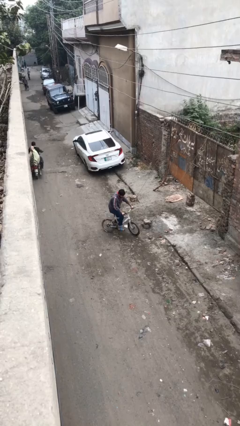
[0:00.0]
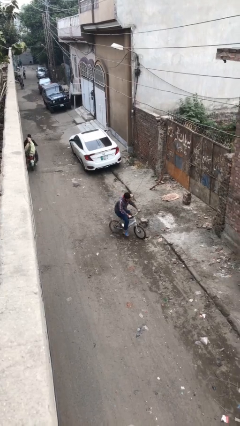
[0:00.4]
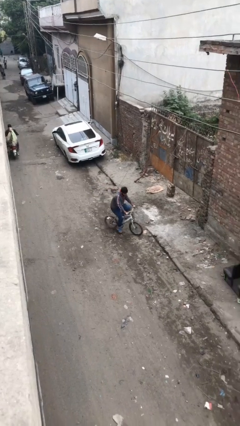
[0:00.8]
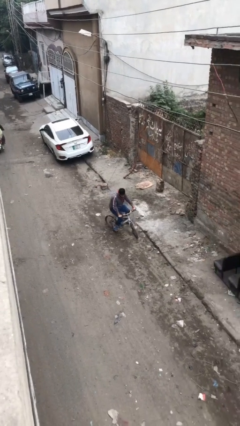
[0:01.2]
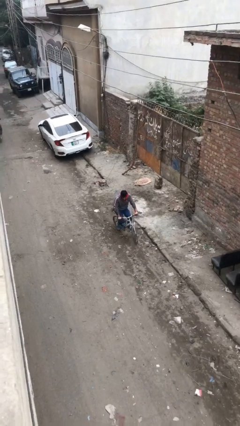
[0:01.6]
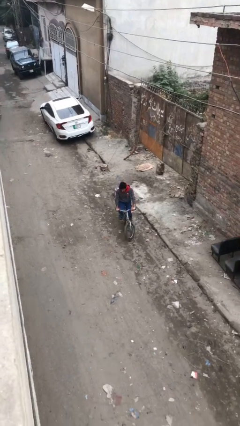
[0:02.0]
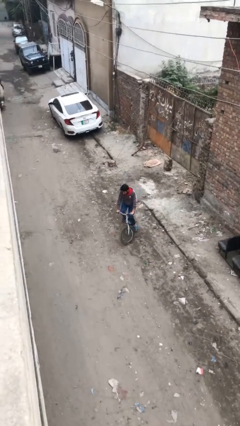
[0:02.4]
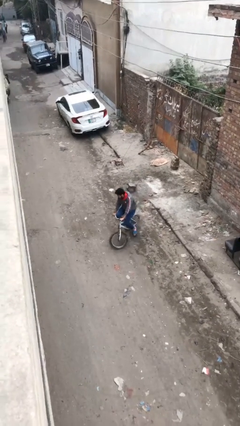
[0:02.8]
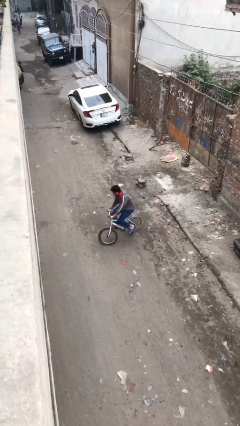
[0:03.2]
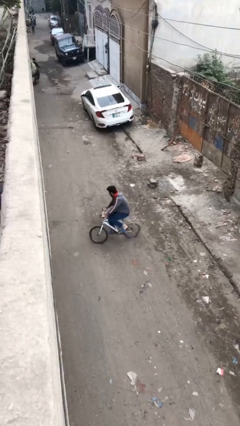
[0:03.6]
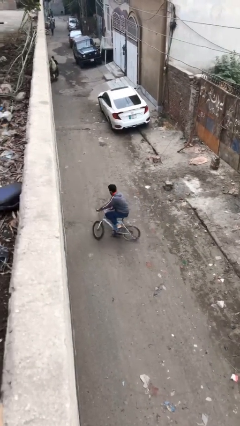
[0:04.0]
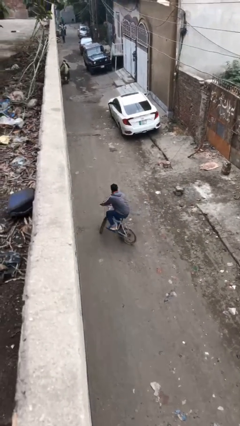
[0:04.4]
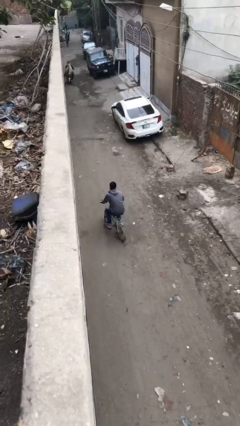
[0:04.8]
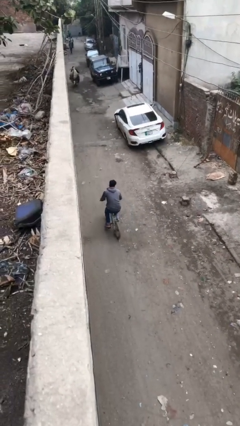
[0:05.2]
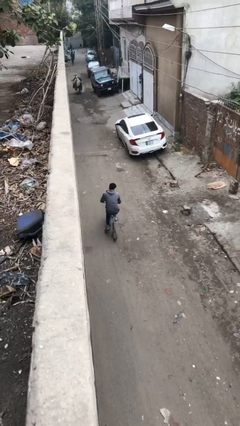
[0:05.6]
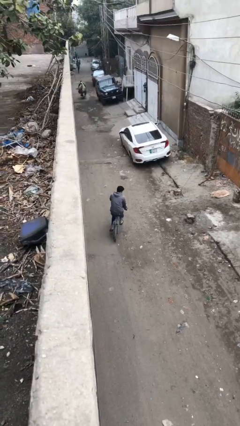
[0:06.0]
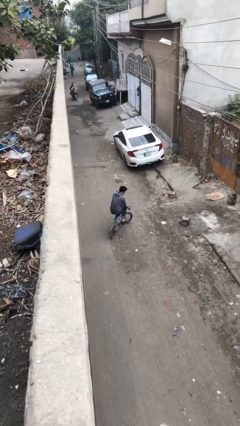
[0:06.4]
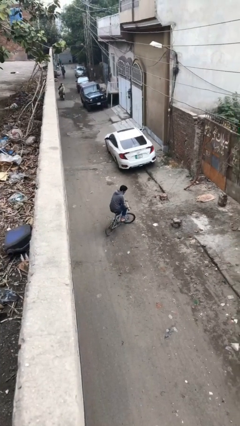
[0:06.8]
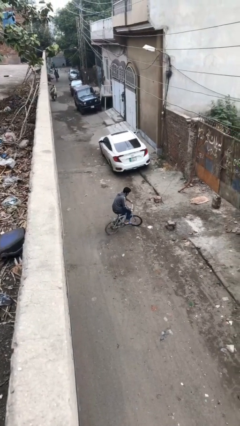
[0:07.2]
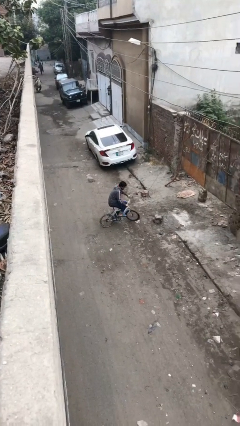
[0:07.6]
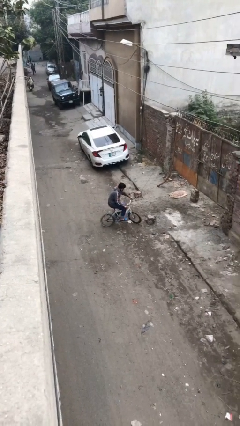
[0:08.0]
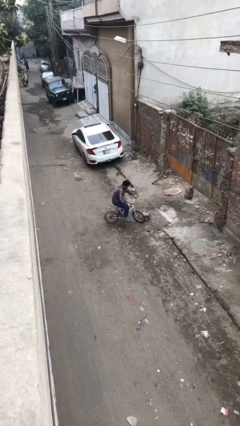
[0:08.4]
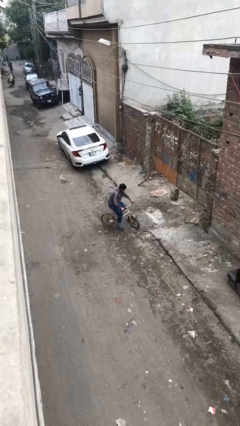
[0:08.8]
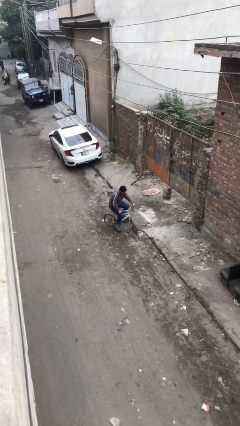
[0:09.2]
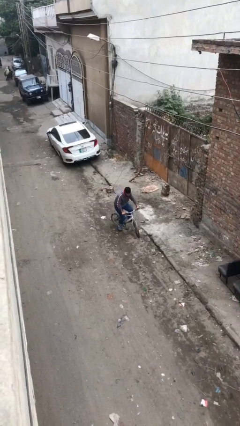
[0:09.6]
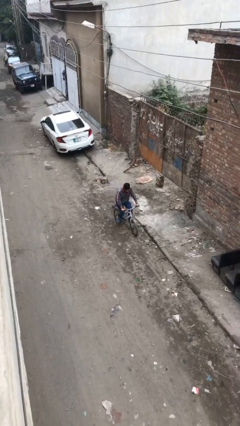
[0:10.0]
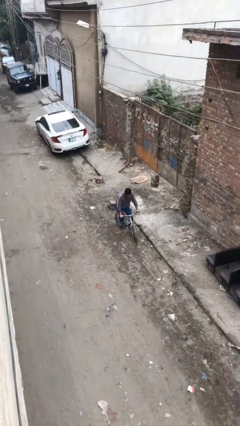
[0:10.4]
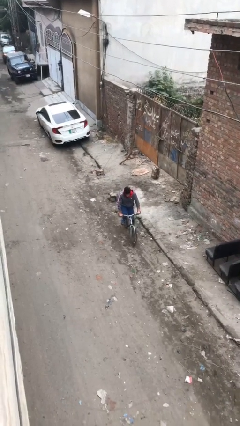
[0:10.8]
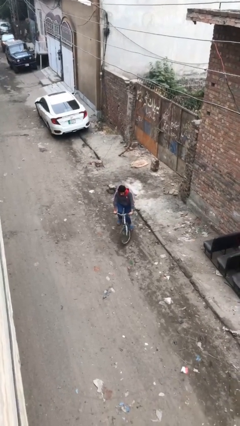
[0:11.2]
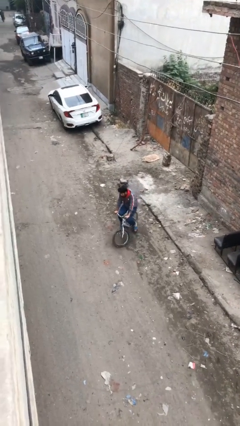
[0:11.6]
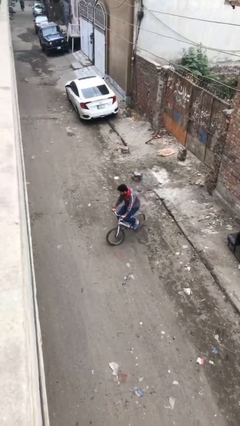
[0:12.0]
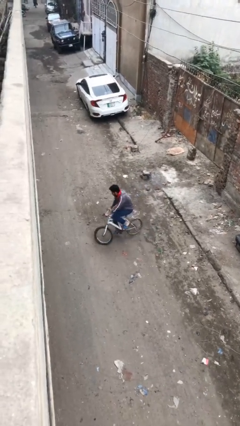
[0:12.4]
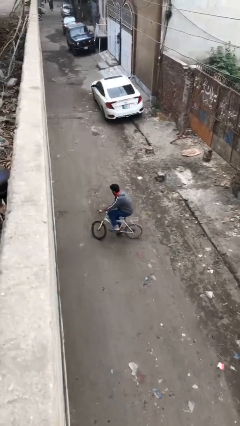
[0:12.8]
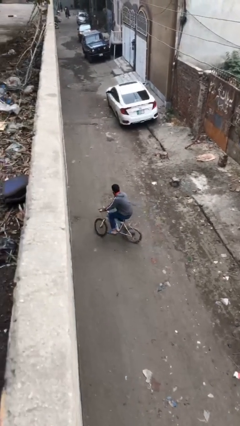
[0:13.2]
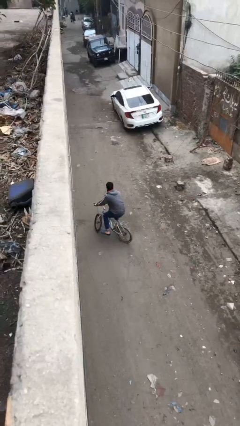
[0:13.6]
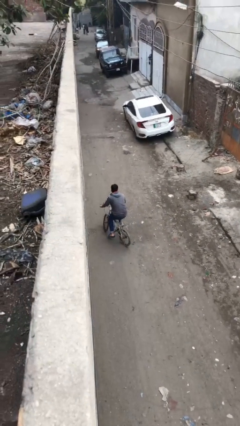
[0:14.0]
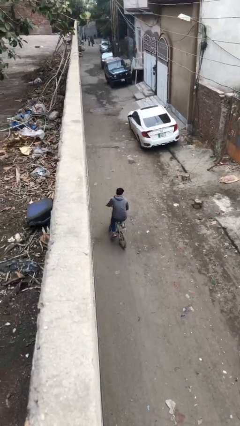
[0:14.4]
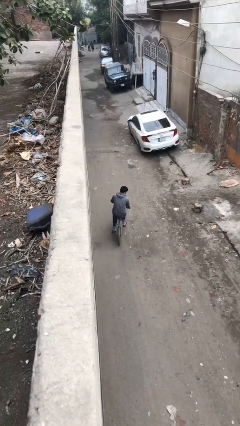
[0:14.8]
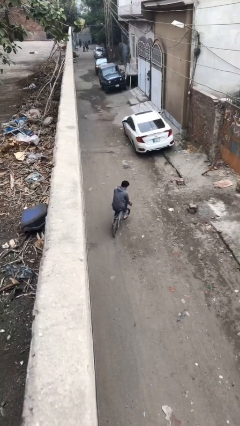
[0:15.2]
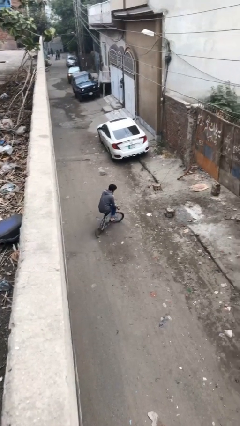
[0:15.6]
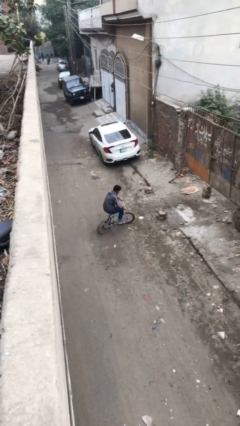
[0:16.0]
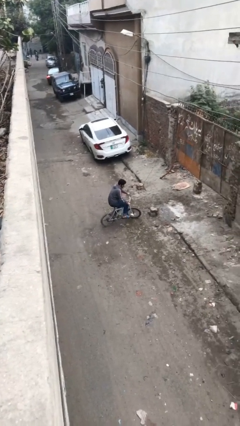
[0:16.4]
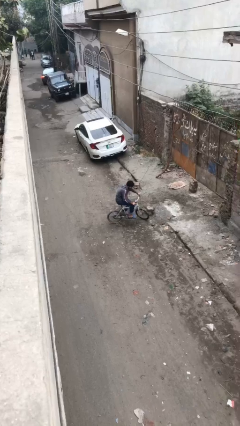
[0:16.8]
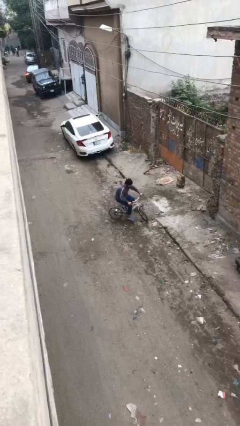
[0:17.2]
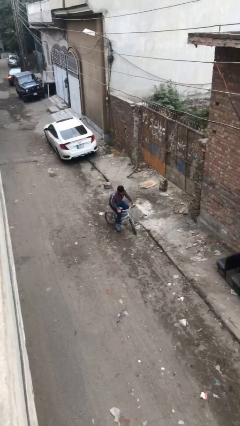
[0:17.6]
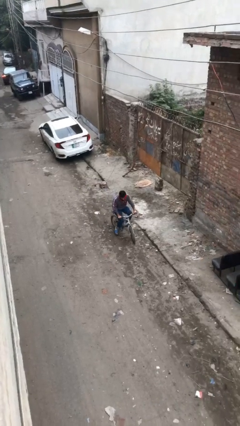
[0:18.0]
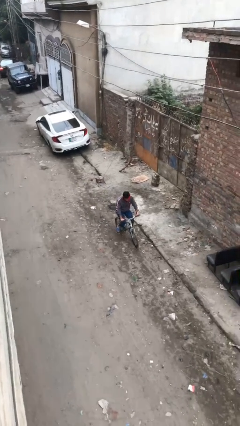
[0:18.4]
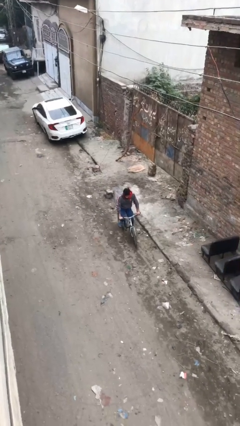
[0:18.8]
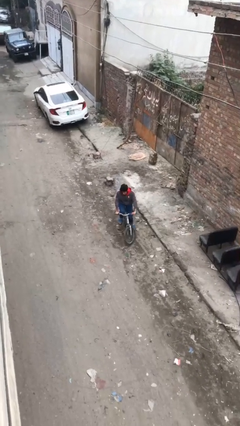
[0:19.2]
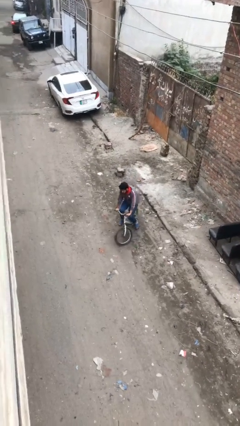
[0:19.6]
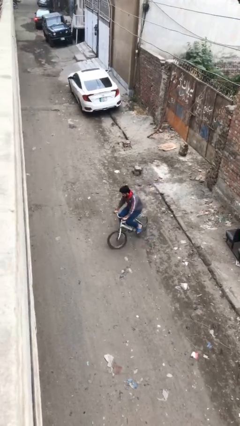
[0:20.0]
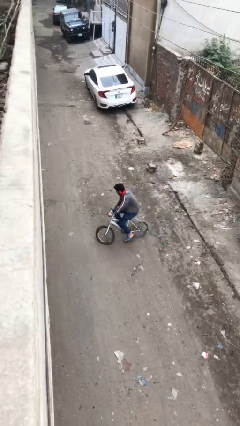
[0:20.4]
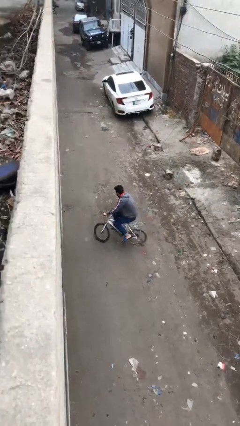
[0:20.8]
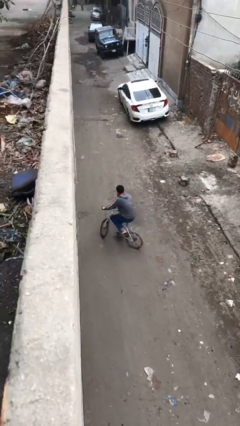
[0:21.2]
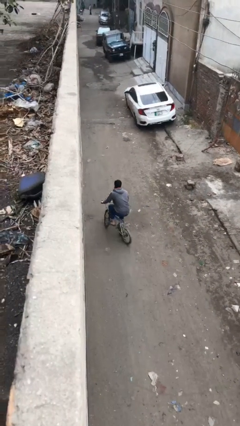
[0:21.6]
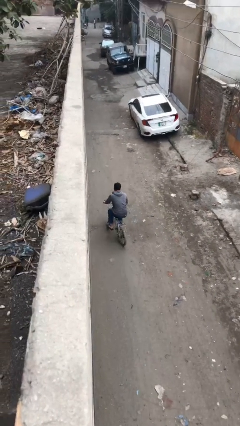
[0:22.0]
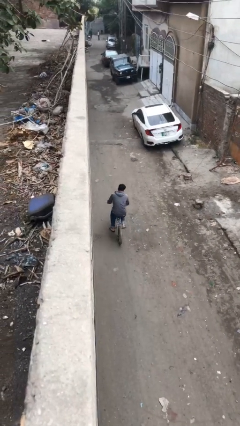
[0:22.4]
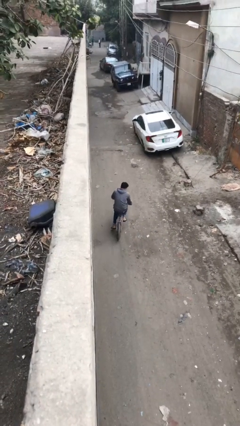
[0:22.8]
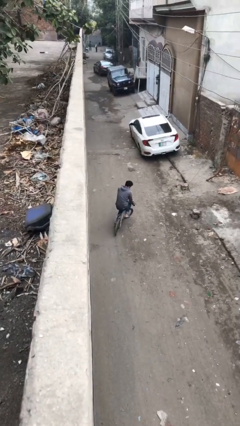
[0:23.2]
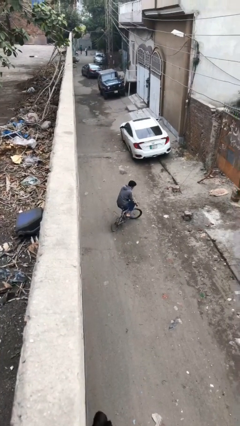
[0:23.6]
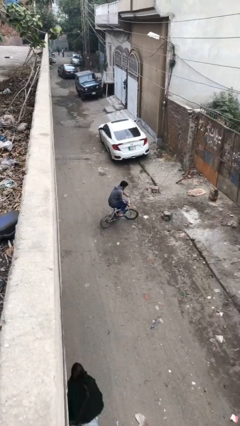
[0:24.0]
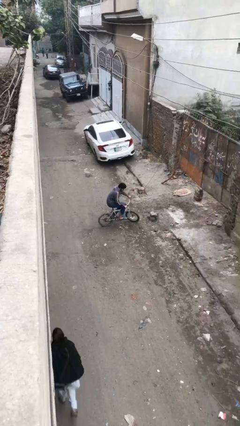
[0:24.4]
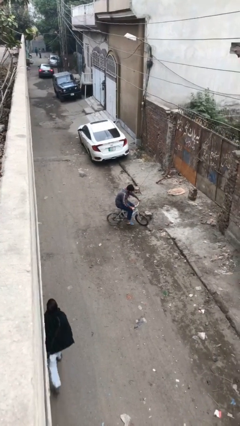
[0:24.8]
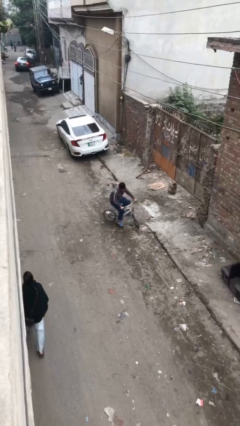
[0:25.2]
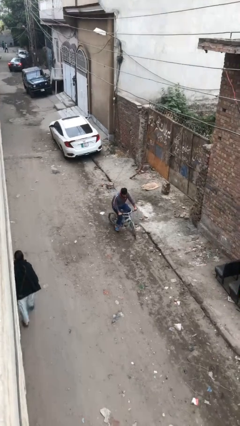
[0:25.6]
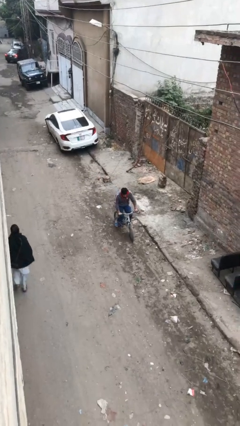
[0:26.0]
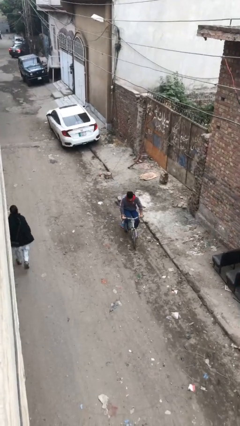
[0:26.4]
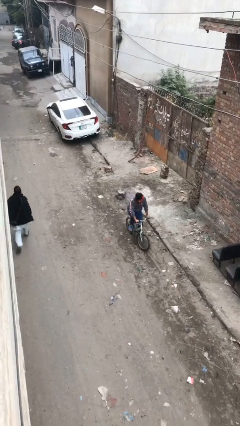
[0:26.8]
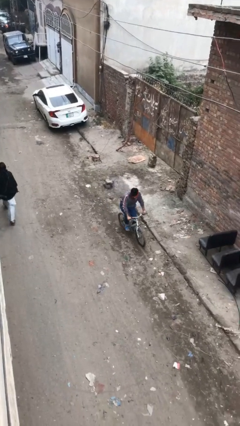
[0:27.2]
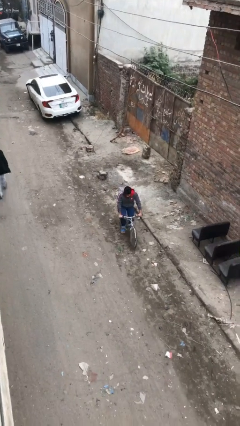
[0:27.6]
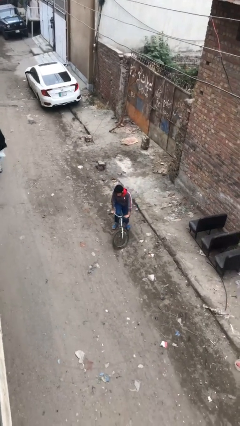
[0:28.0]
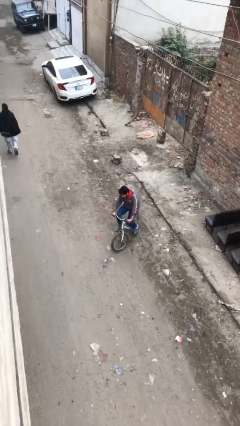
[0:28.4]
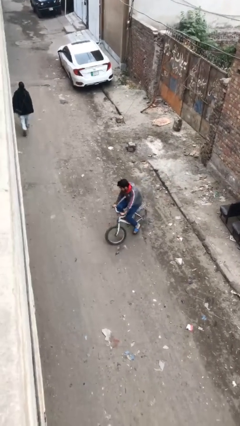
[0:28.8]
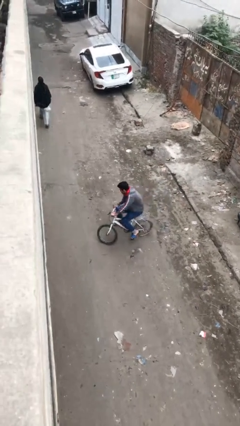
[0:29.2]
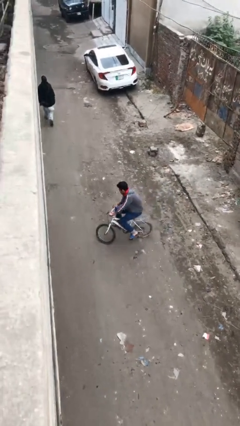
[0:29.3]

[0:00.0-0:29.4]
person rides bicycle

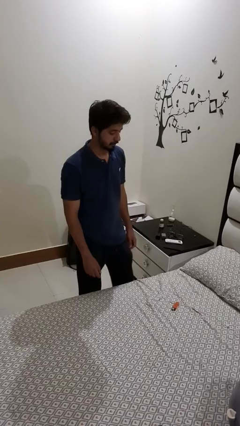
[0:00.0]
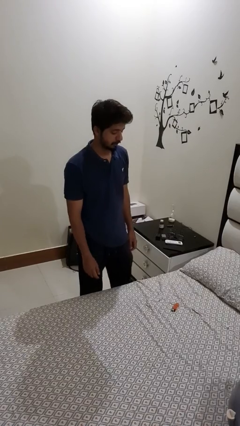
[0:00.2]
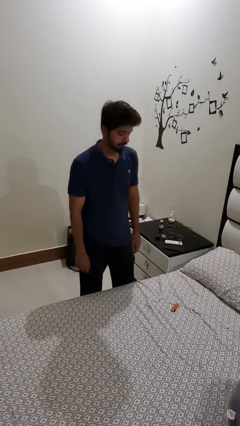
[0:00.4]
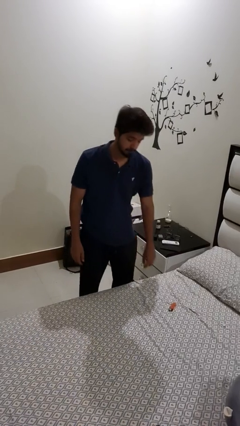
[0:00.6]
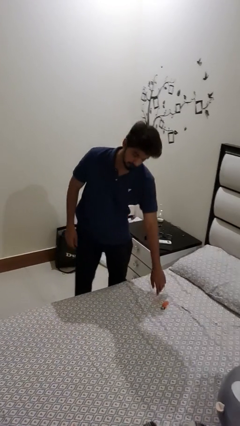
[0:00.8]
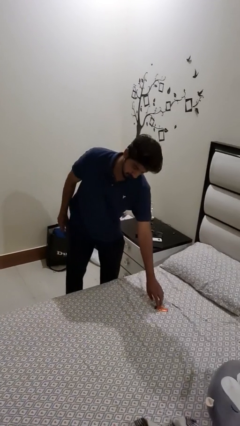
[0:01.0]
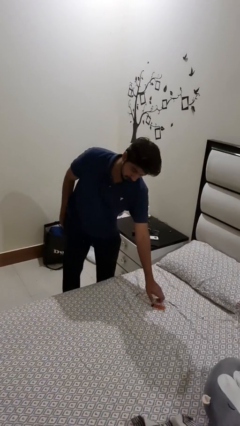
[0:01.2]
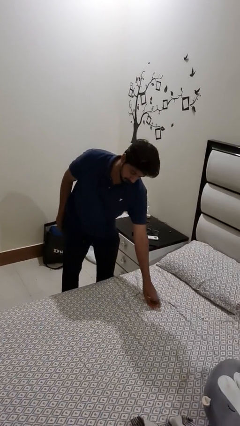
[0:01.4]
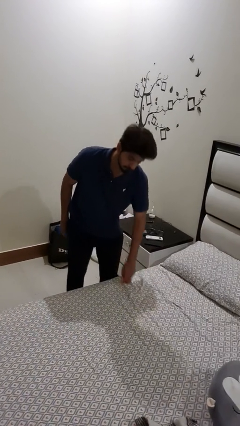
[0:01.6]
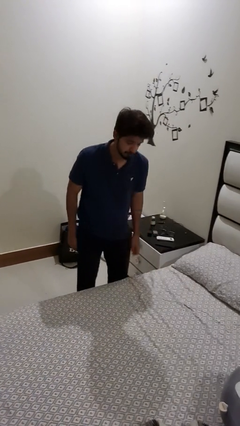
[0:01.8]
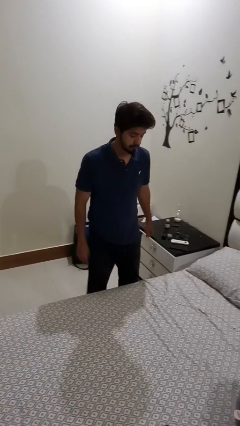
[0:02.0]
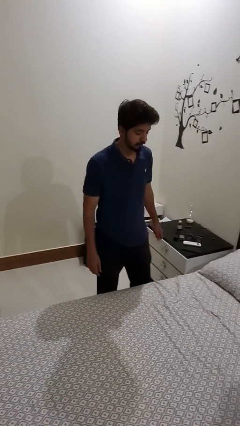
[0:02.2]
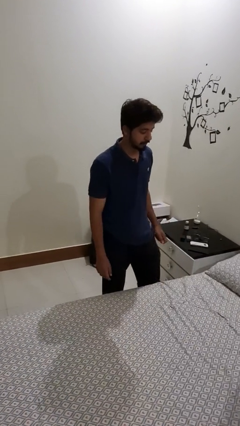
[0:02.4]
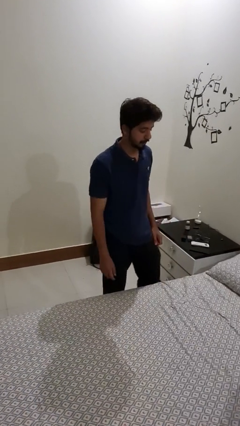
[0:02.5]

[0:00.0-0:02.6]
person picks up object from bed

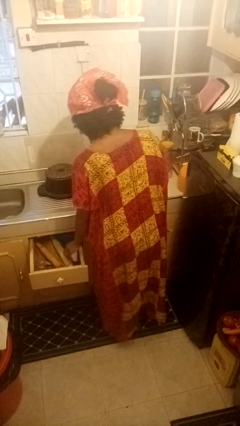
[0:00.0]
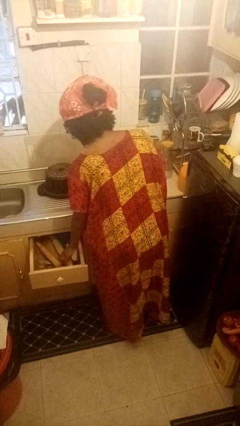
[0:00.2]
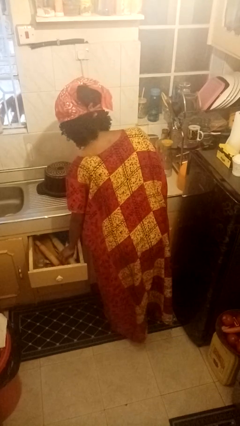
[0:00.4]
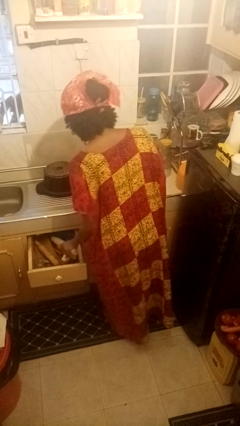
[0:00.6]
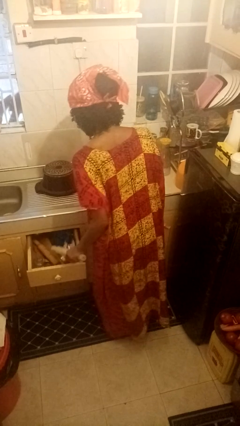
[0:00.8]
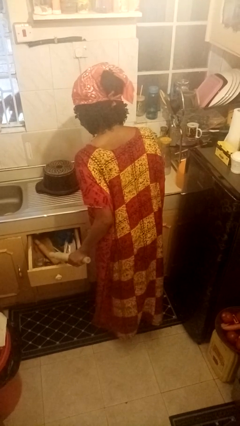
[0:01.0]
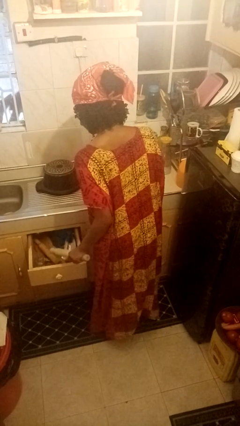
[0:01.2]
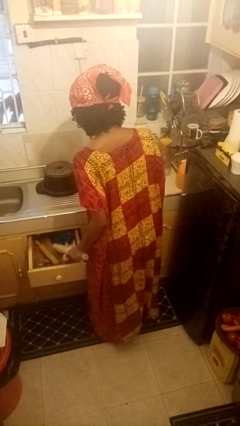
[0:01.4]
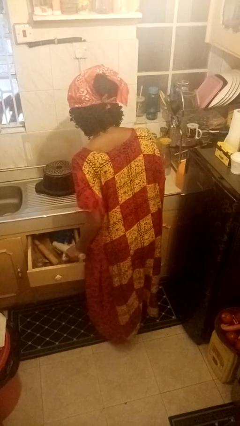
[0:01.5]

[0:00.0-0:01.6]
person takes object from kitchen drawer
